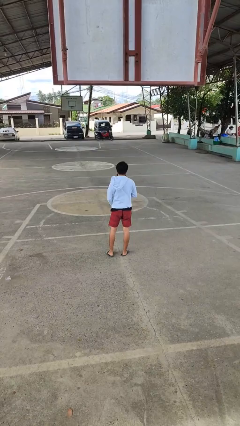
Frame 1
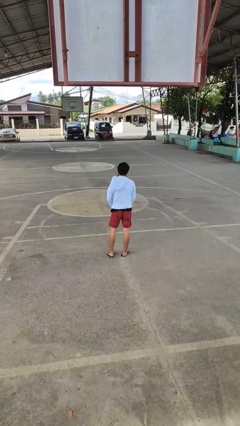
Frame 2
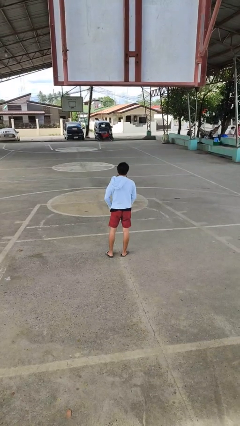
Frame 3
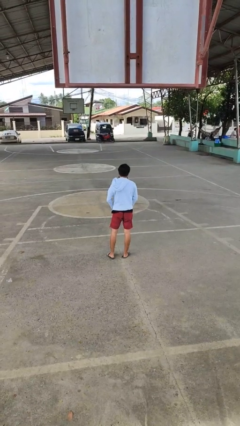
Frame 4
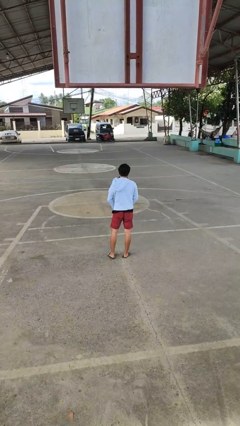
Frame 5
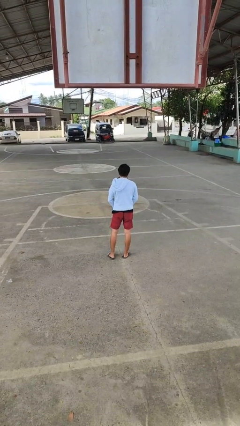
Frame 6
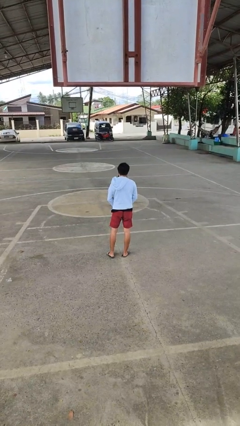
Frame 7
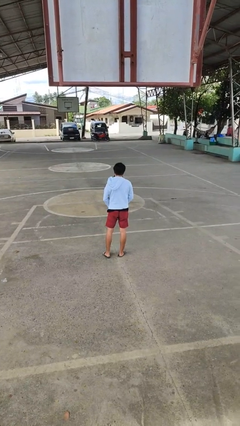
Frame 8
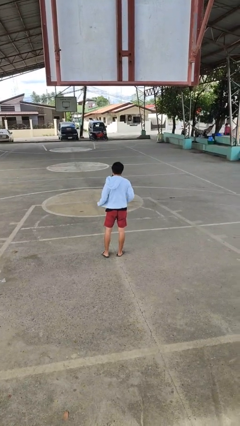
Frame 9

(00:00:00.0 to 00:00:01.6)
person unzips jacket

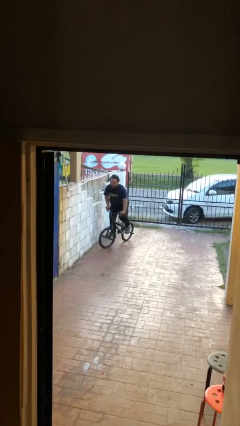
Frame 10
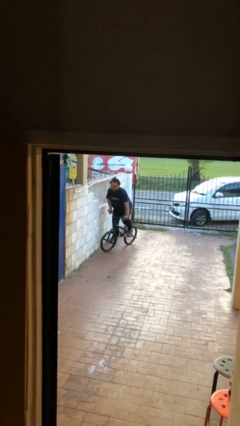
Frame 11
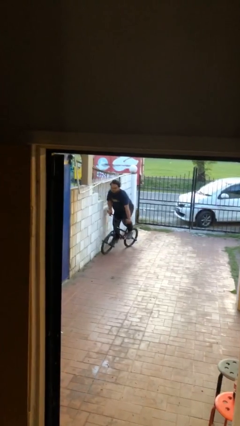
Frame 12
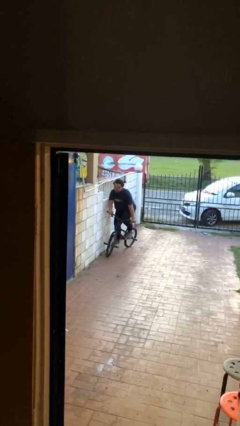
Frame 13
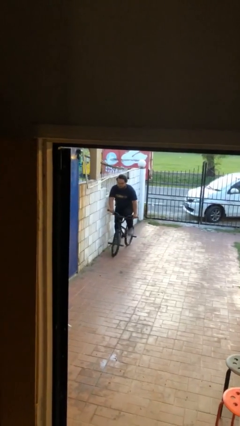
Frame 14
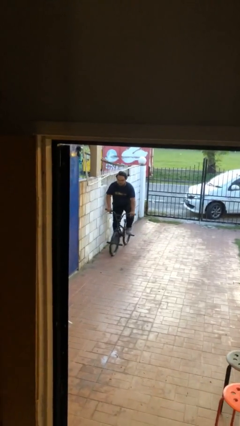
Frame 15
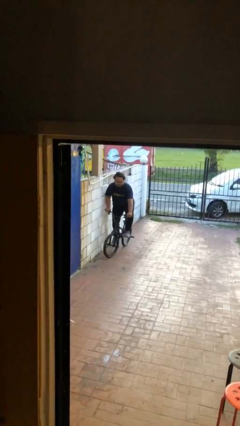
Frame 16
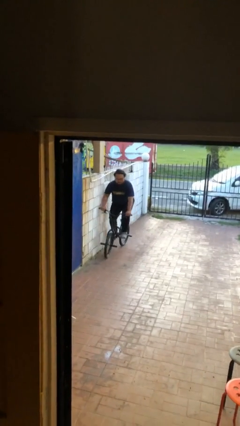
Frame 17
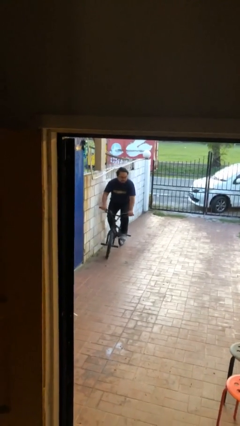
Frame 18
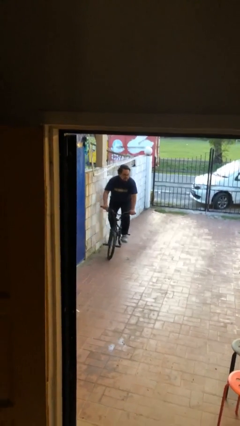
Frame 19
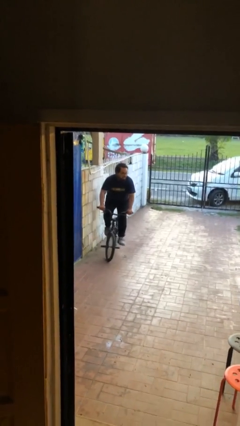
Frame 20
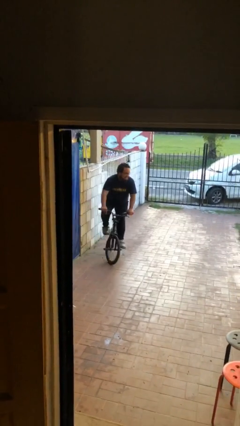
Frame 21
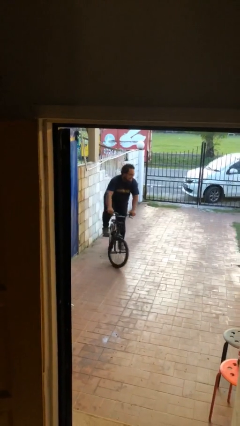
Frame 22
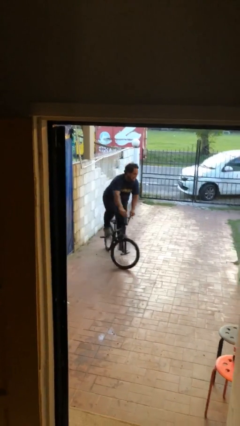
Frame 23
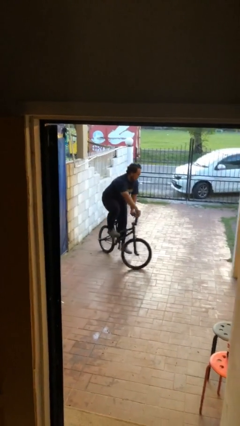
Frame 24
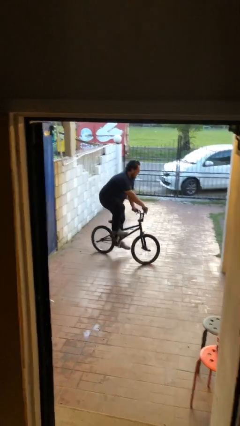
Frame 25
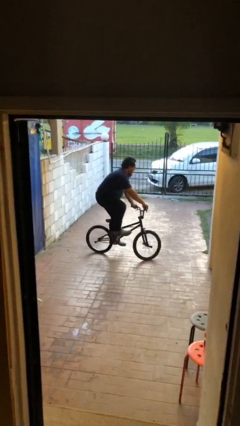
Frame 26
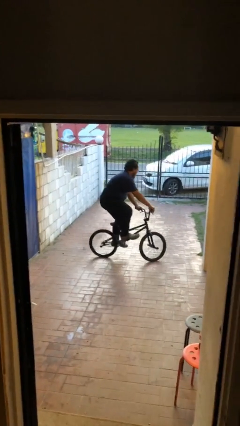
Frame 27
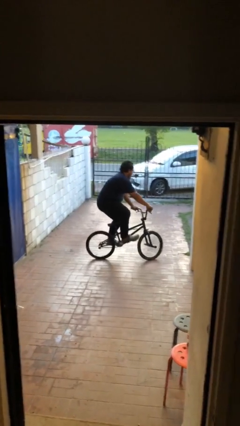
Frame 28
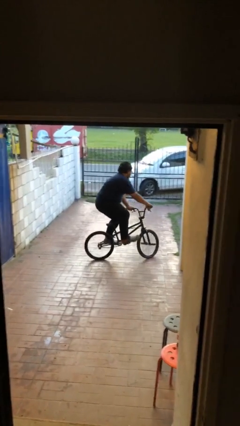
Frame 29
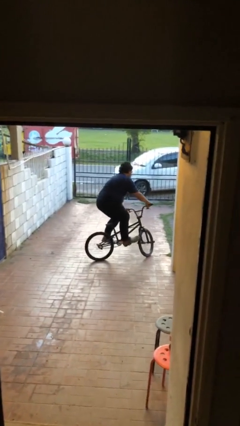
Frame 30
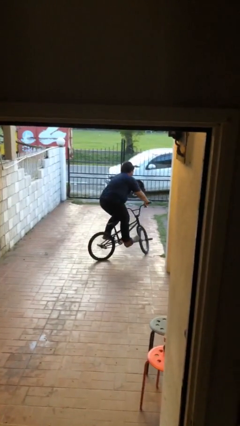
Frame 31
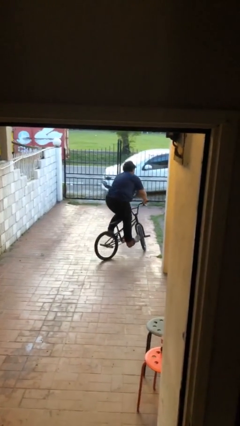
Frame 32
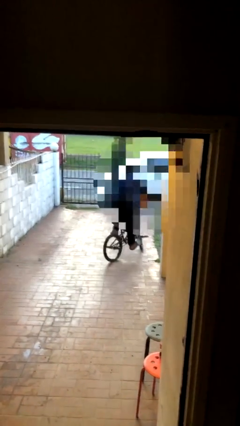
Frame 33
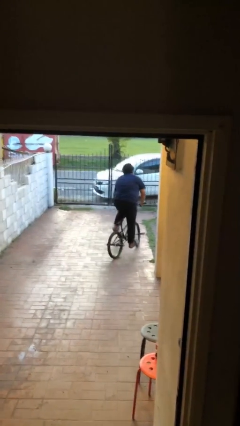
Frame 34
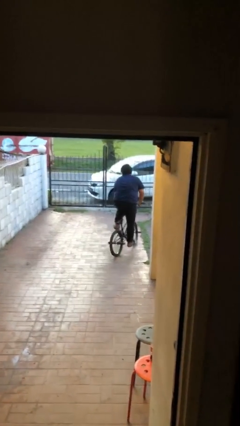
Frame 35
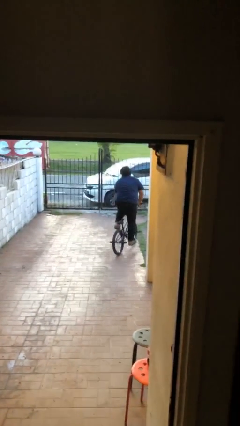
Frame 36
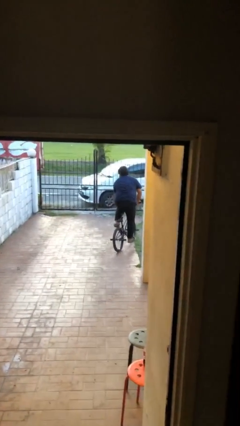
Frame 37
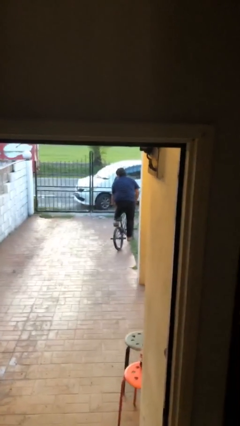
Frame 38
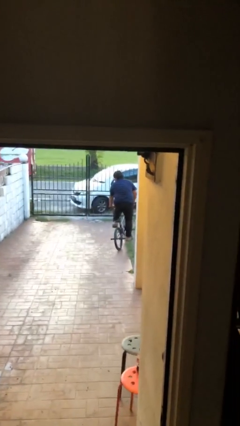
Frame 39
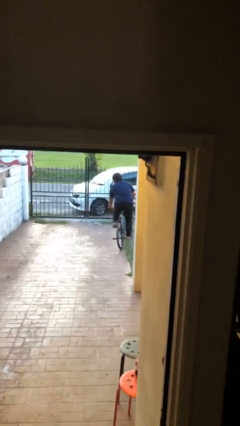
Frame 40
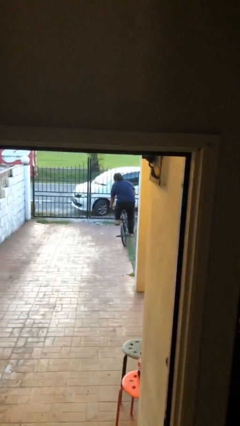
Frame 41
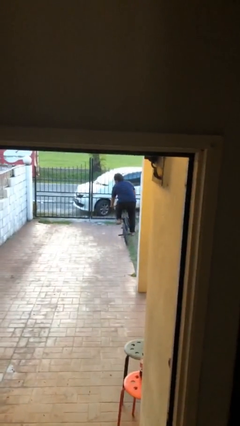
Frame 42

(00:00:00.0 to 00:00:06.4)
person rides bicycle

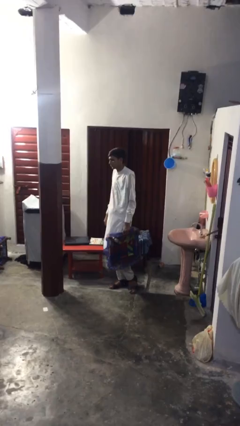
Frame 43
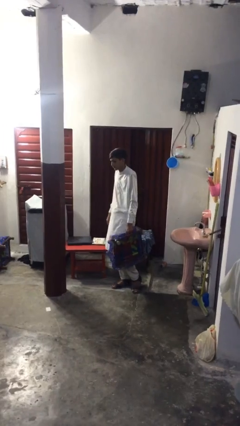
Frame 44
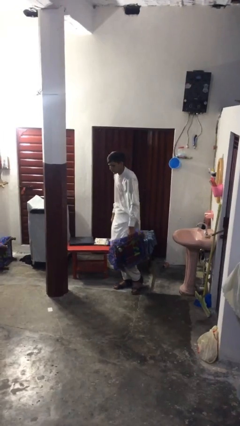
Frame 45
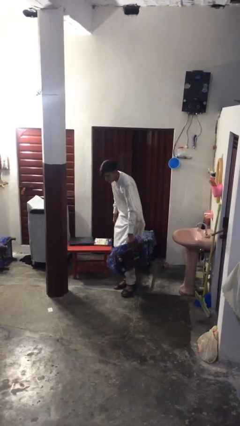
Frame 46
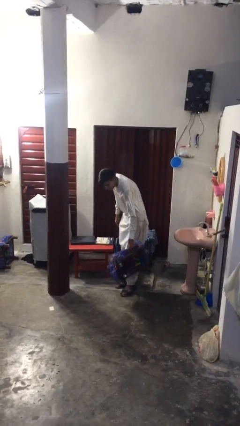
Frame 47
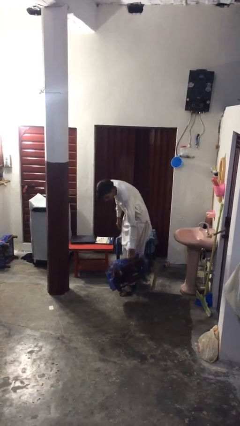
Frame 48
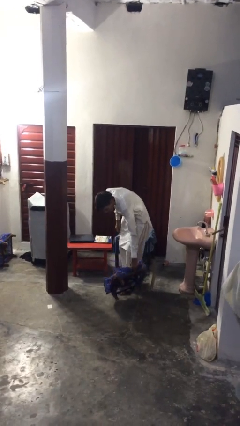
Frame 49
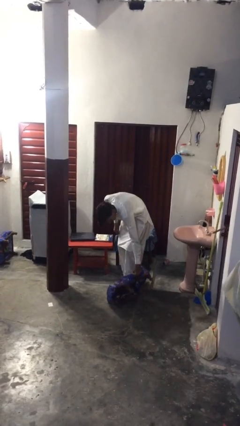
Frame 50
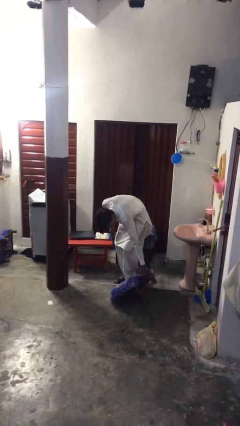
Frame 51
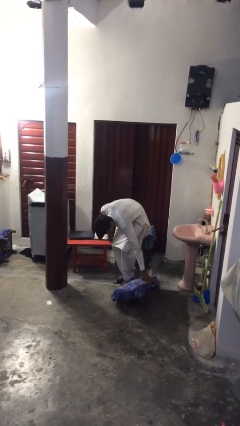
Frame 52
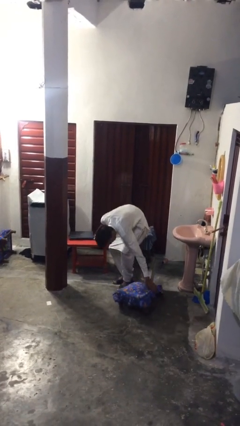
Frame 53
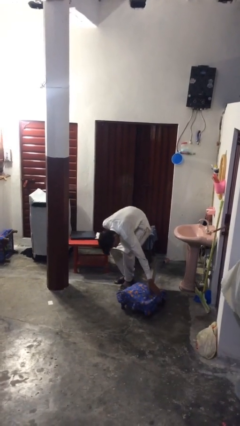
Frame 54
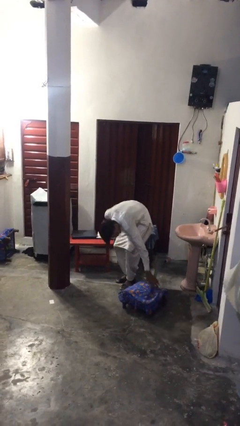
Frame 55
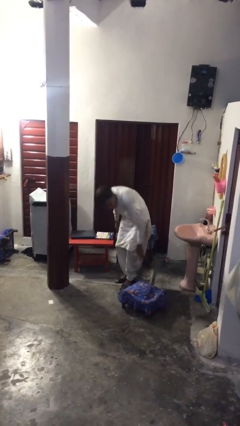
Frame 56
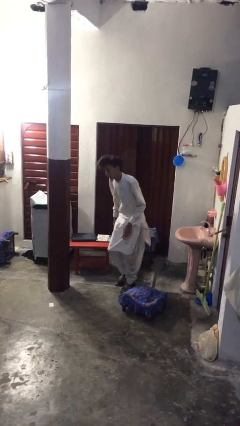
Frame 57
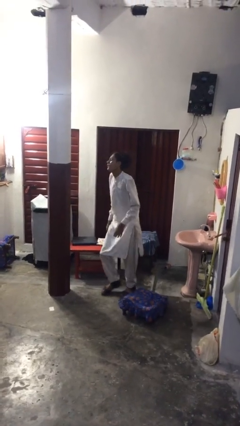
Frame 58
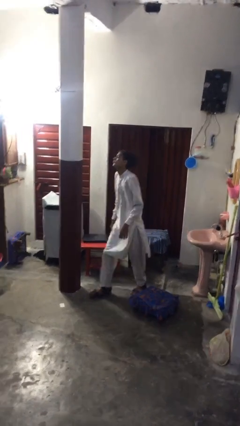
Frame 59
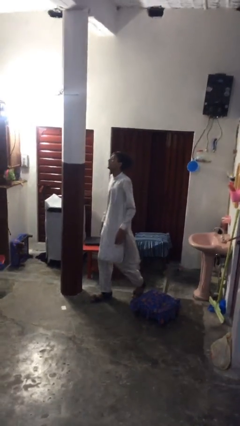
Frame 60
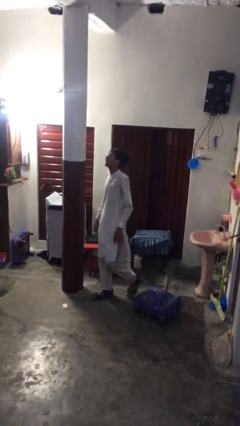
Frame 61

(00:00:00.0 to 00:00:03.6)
person puts down object on floor

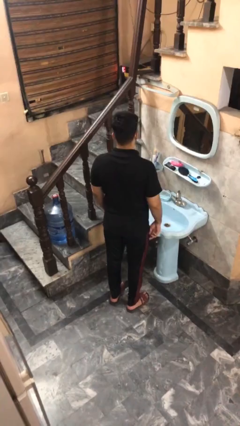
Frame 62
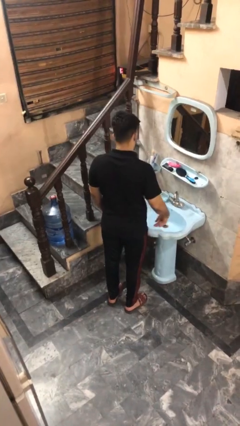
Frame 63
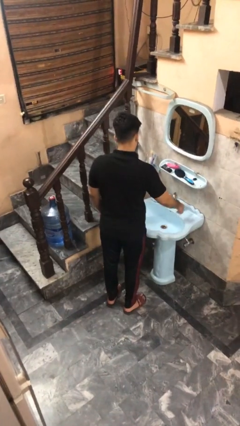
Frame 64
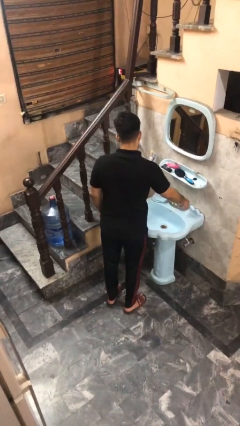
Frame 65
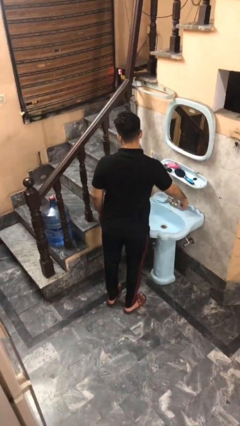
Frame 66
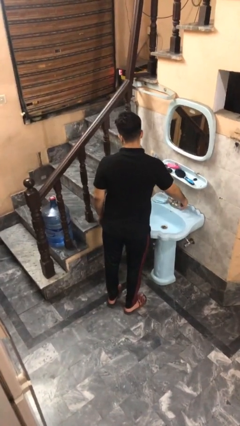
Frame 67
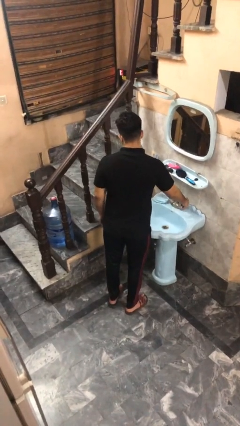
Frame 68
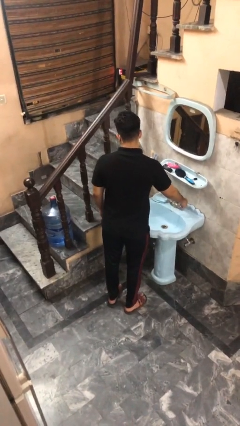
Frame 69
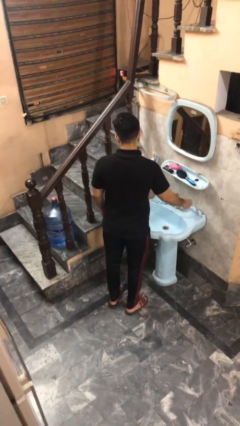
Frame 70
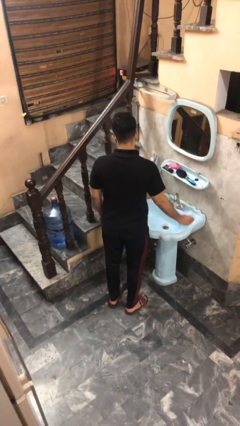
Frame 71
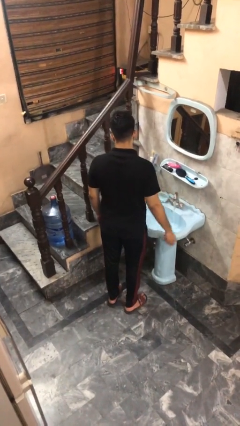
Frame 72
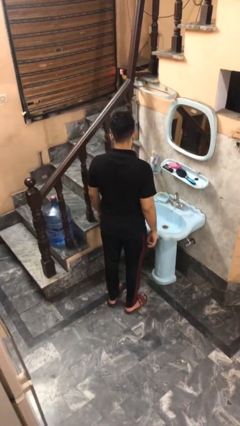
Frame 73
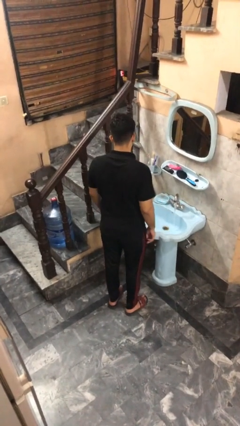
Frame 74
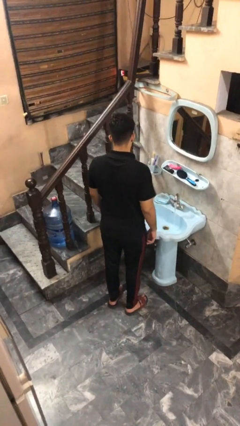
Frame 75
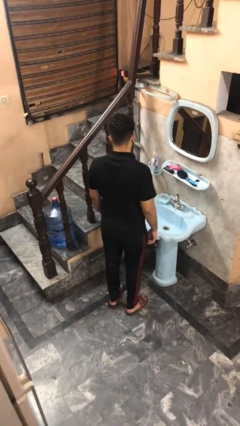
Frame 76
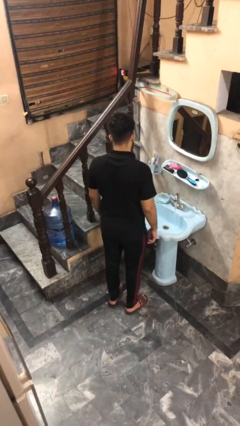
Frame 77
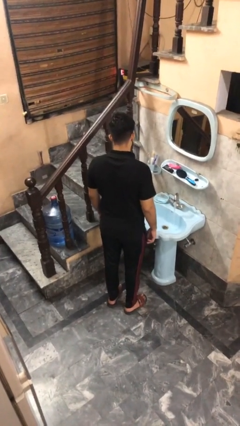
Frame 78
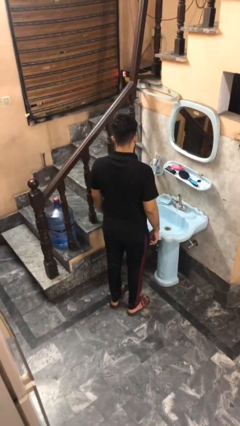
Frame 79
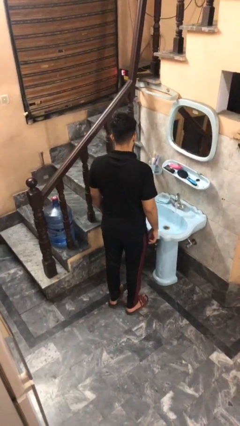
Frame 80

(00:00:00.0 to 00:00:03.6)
person turns on faucet

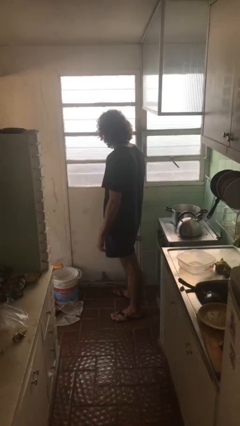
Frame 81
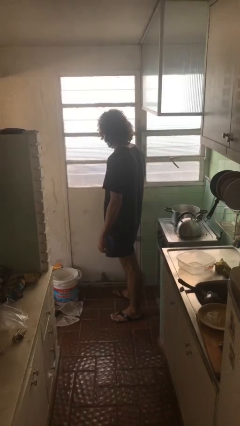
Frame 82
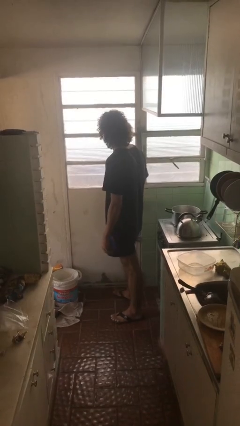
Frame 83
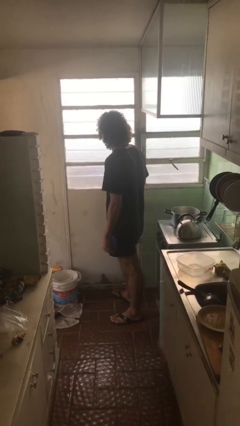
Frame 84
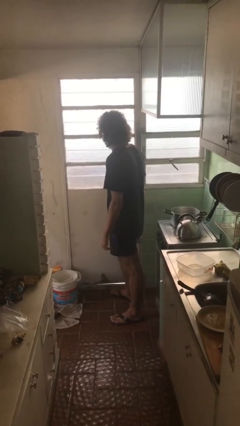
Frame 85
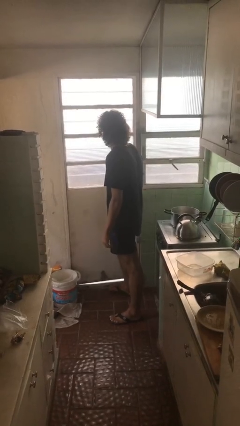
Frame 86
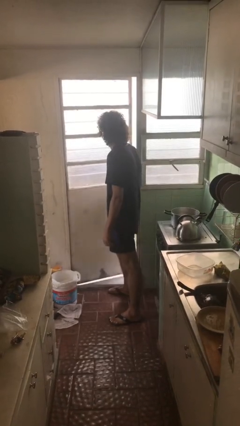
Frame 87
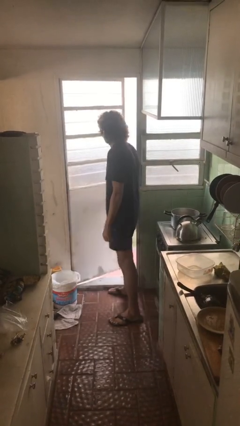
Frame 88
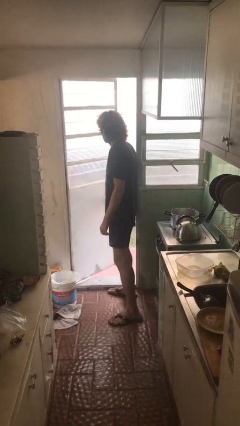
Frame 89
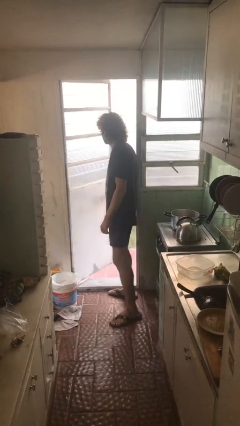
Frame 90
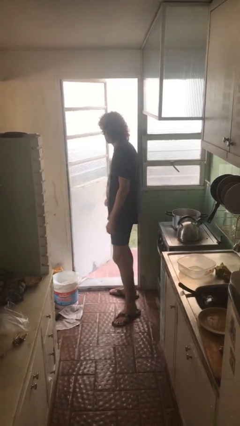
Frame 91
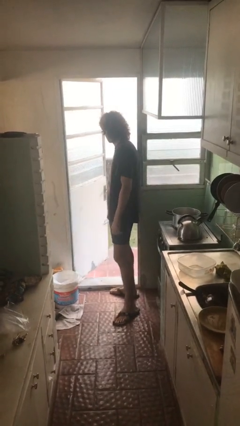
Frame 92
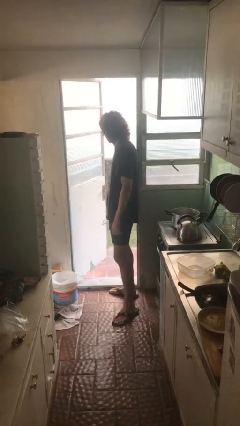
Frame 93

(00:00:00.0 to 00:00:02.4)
person opens facility door
